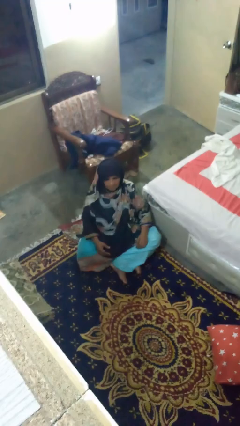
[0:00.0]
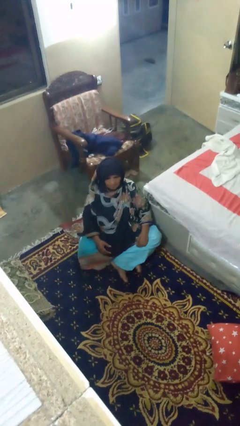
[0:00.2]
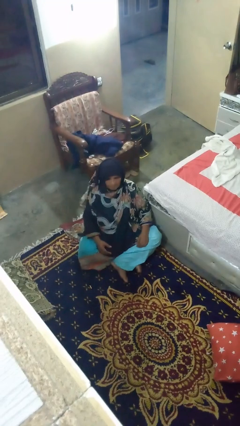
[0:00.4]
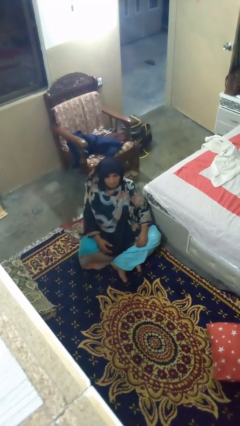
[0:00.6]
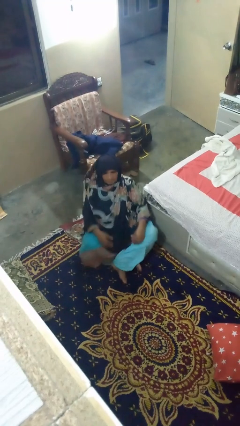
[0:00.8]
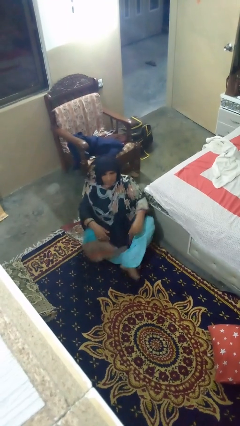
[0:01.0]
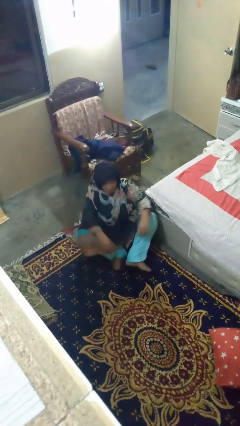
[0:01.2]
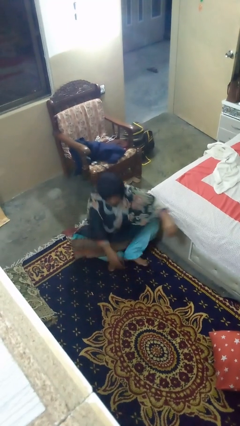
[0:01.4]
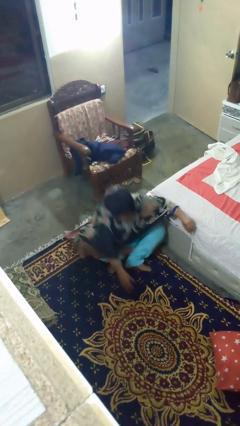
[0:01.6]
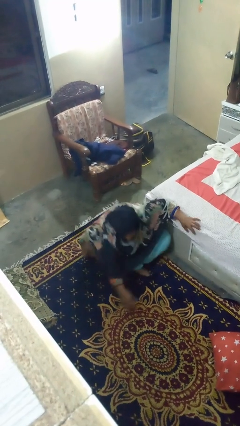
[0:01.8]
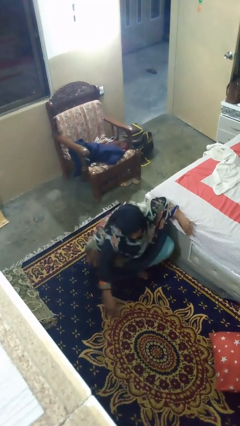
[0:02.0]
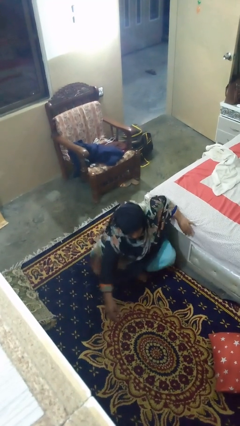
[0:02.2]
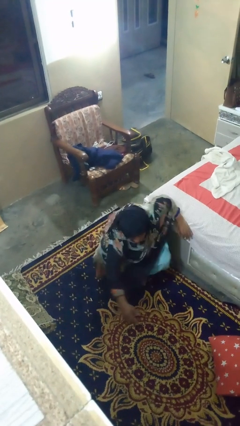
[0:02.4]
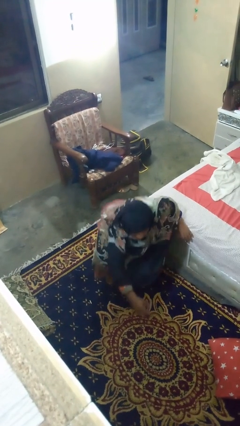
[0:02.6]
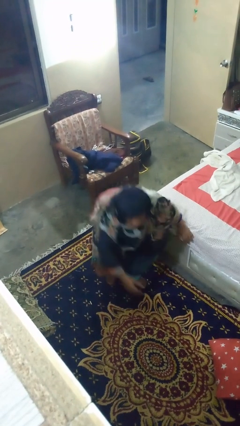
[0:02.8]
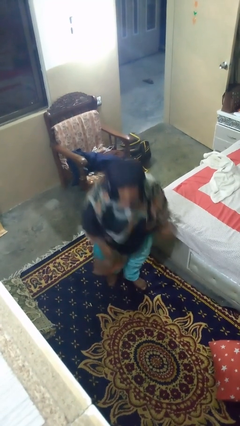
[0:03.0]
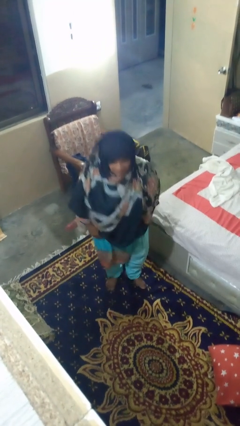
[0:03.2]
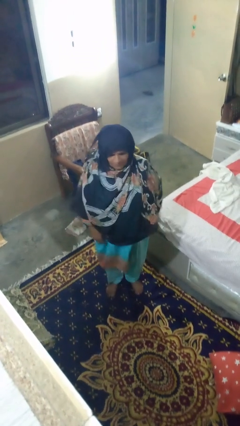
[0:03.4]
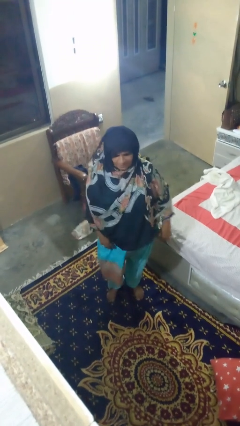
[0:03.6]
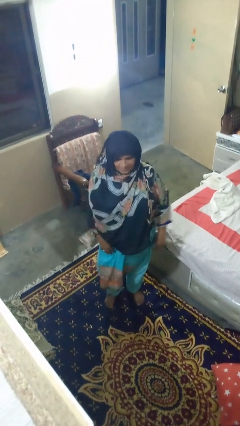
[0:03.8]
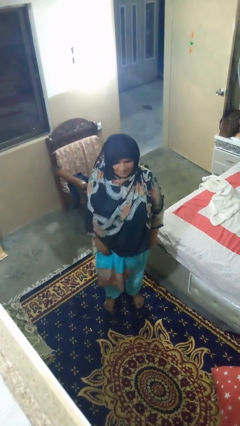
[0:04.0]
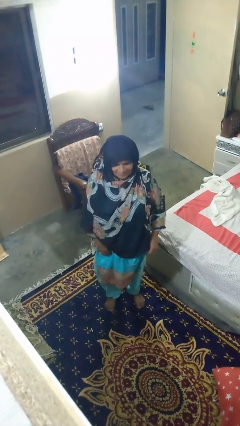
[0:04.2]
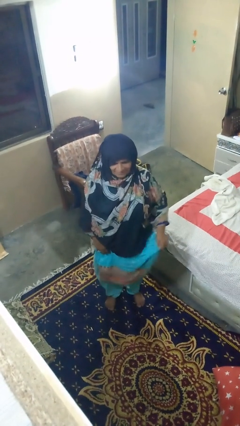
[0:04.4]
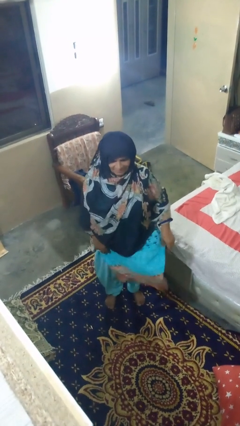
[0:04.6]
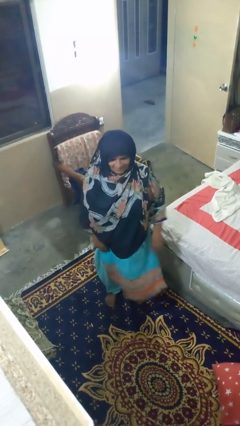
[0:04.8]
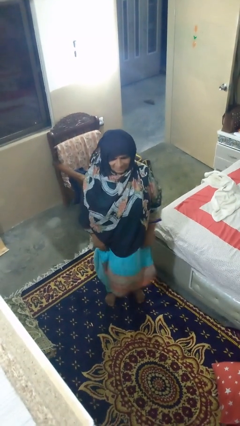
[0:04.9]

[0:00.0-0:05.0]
person stands up from floor

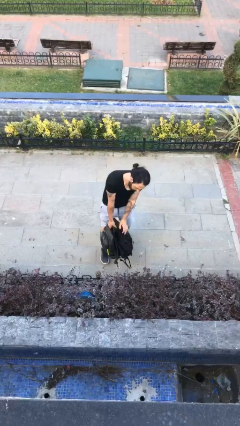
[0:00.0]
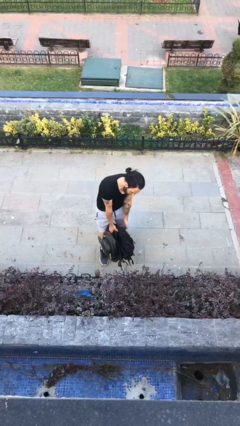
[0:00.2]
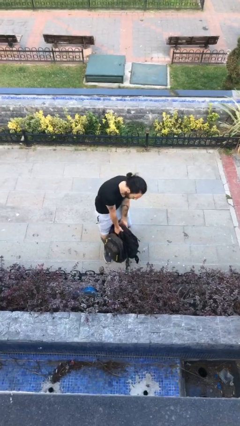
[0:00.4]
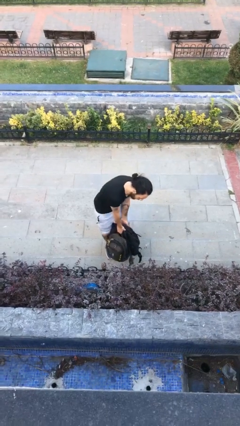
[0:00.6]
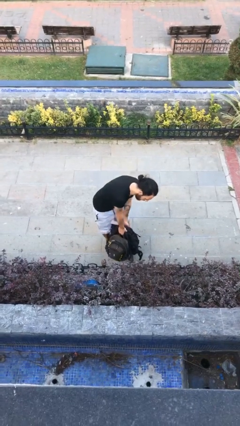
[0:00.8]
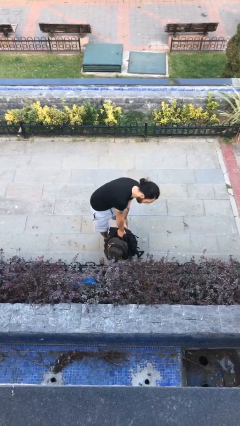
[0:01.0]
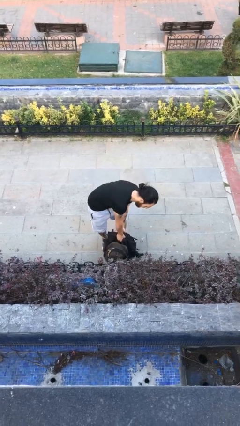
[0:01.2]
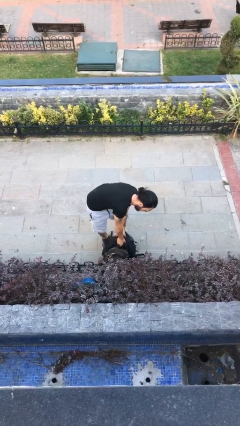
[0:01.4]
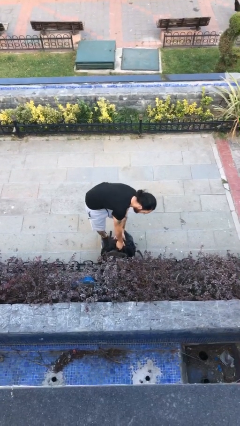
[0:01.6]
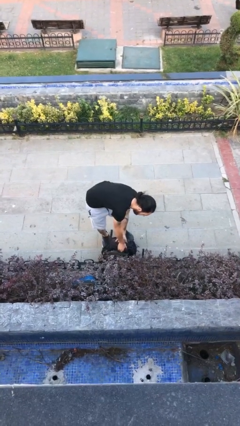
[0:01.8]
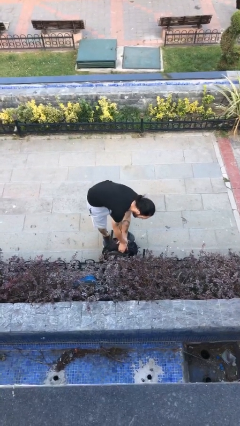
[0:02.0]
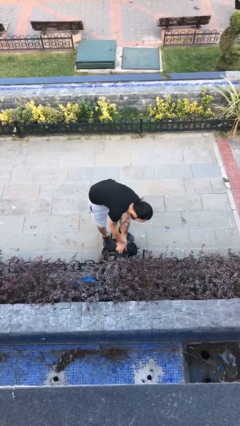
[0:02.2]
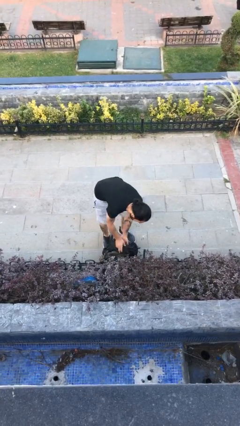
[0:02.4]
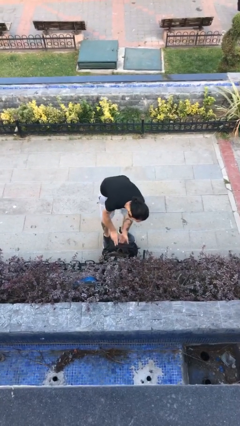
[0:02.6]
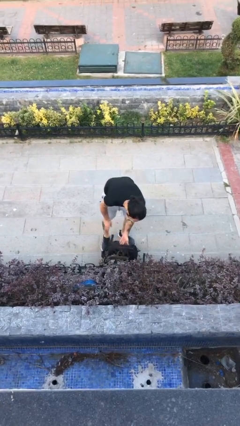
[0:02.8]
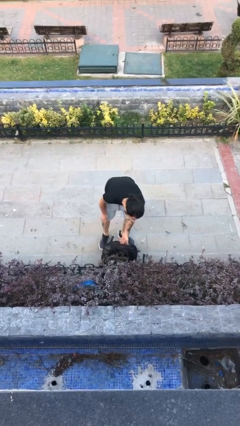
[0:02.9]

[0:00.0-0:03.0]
person puts down object on floor

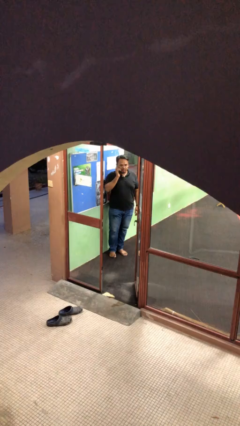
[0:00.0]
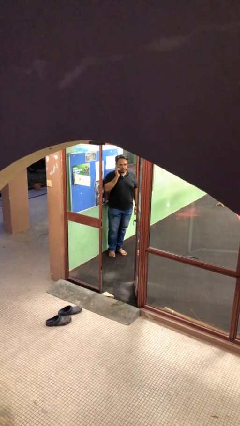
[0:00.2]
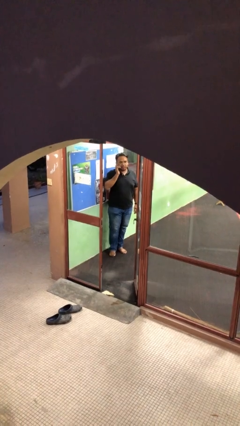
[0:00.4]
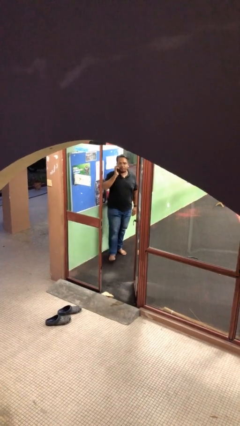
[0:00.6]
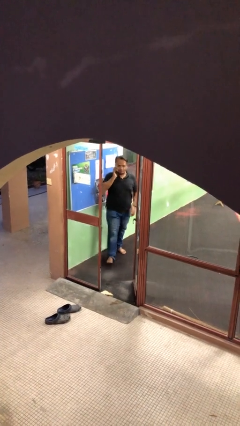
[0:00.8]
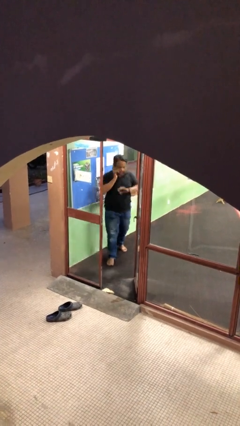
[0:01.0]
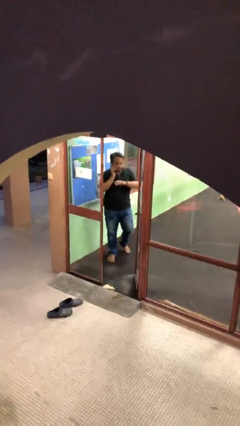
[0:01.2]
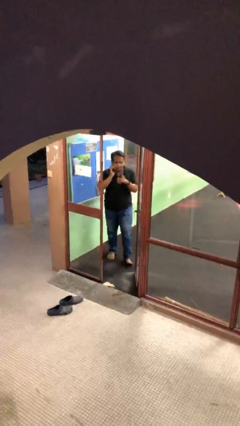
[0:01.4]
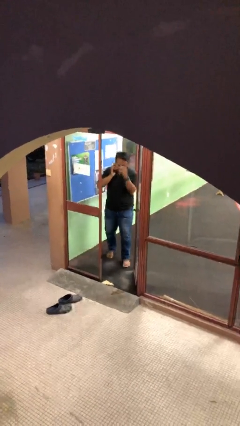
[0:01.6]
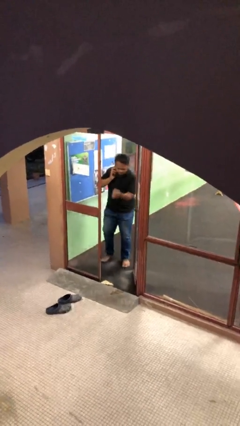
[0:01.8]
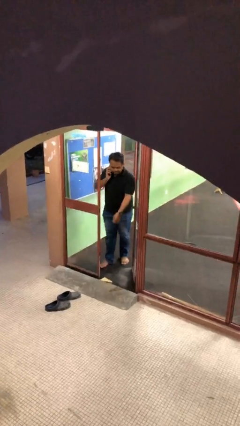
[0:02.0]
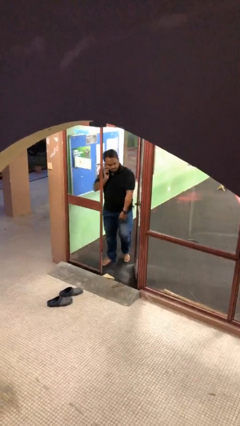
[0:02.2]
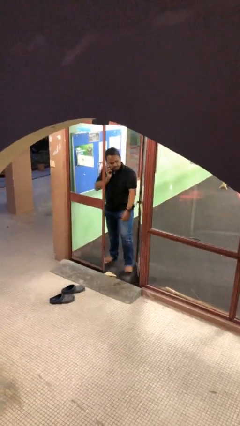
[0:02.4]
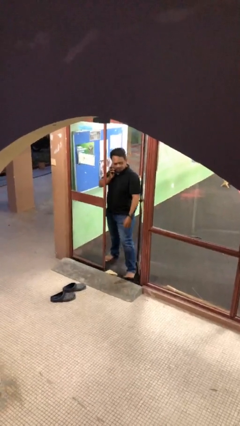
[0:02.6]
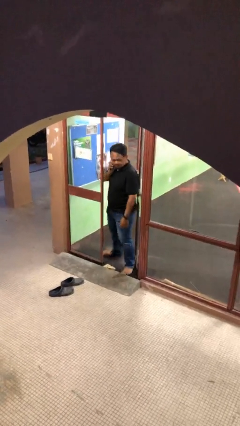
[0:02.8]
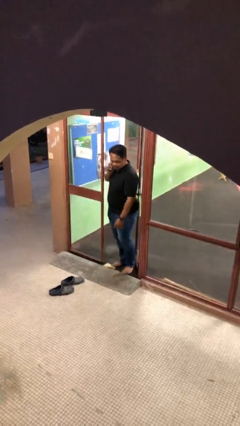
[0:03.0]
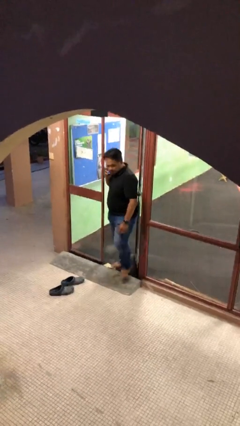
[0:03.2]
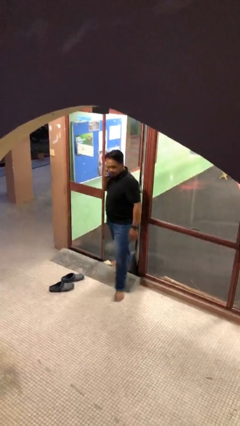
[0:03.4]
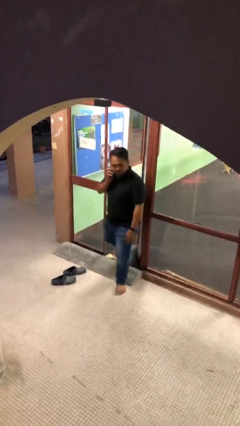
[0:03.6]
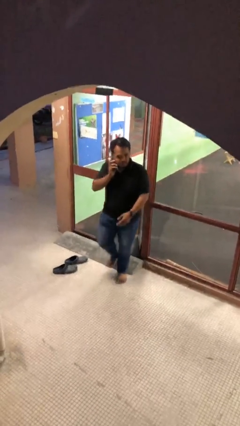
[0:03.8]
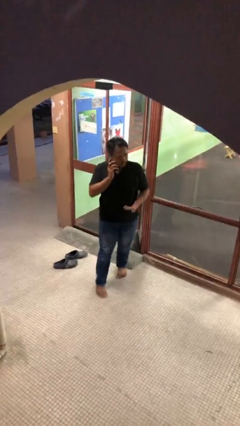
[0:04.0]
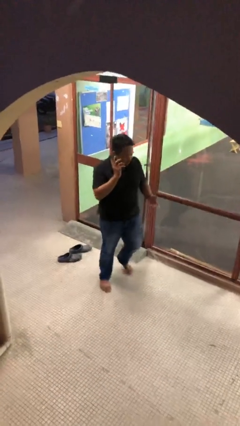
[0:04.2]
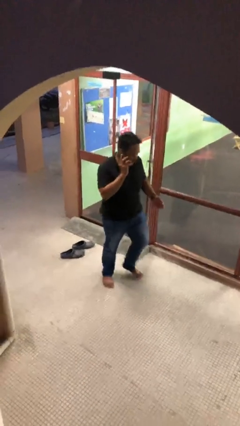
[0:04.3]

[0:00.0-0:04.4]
person enters scene through structure

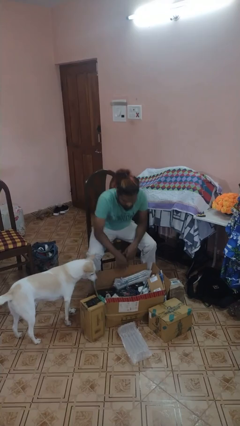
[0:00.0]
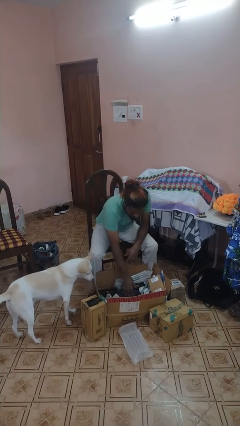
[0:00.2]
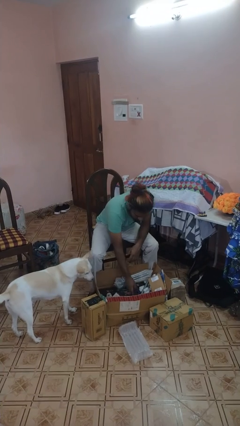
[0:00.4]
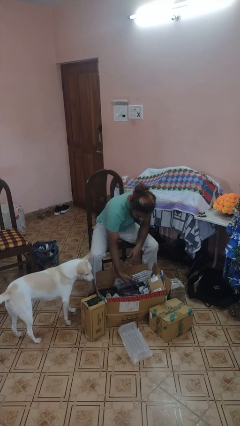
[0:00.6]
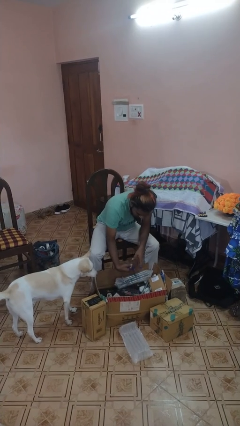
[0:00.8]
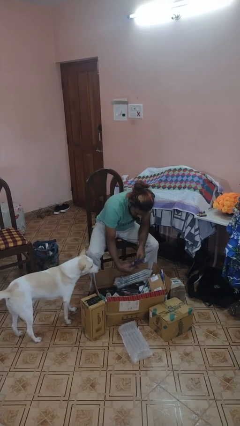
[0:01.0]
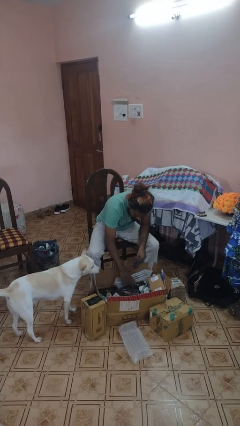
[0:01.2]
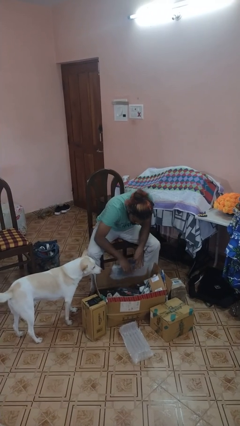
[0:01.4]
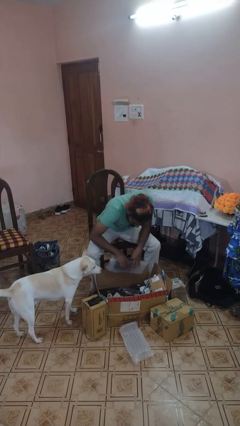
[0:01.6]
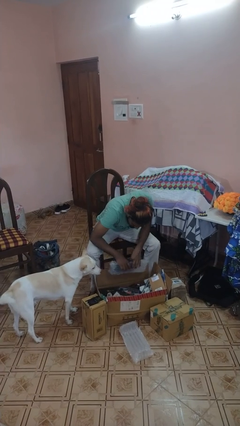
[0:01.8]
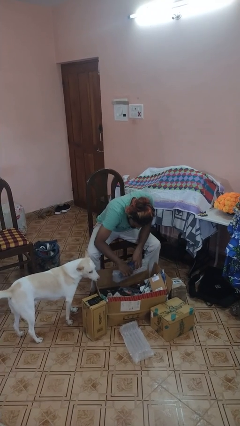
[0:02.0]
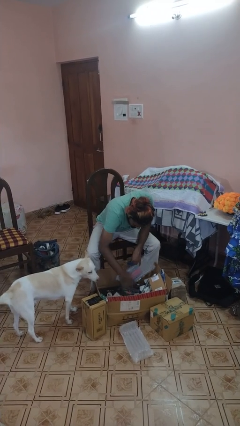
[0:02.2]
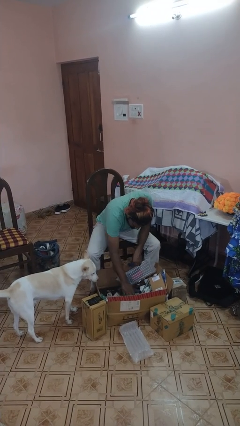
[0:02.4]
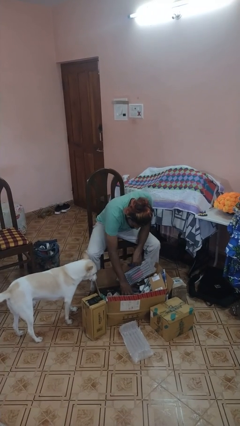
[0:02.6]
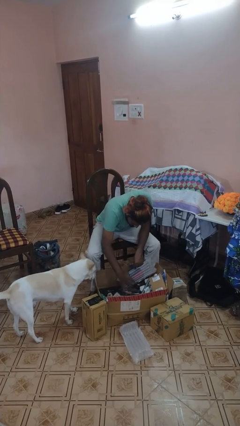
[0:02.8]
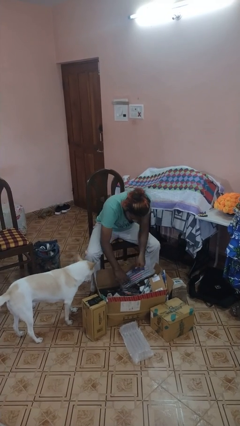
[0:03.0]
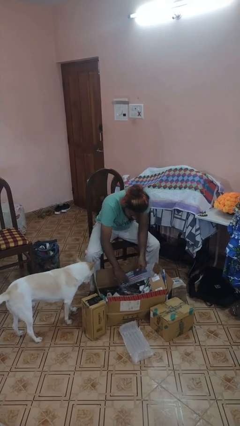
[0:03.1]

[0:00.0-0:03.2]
person searches in box

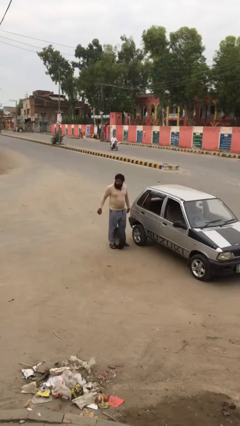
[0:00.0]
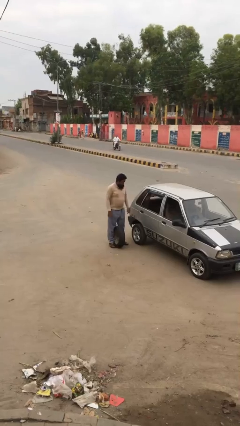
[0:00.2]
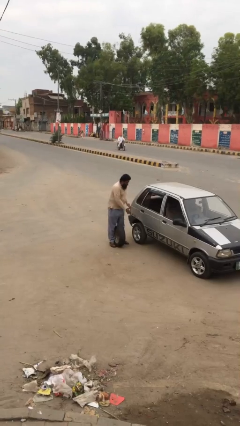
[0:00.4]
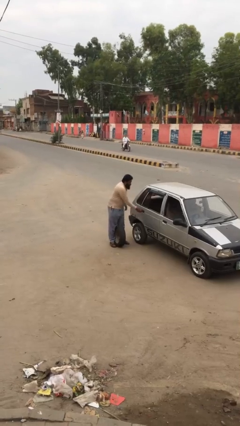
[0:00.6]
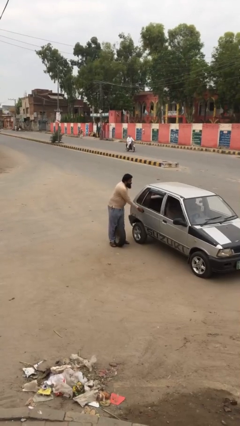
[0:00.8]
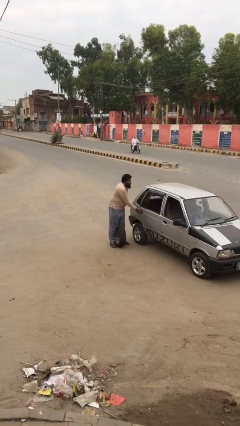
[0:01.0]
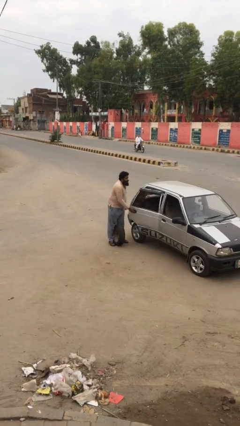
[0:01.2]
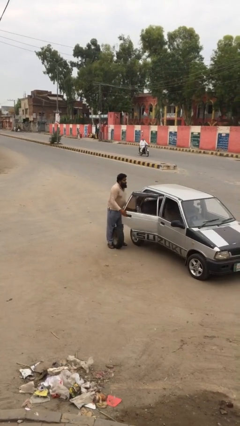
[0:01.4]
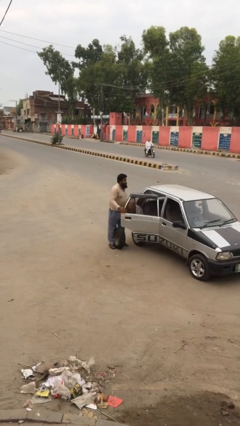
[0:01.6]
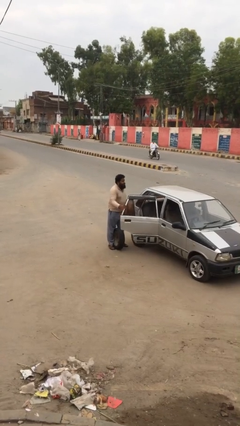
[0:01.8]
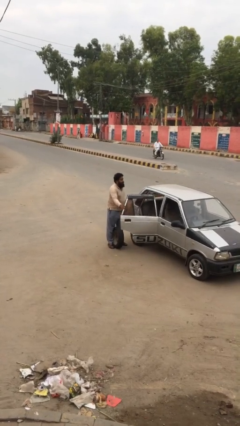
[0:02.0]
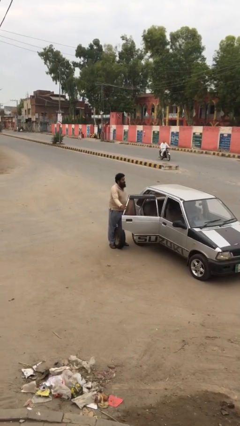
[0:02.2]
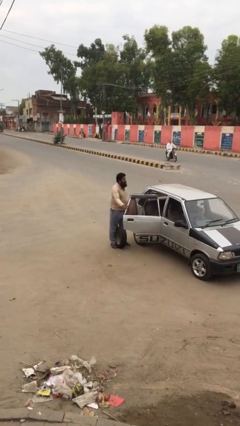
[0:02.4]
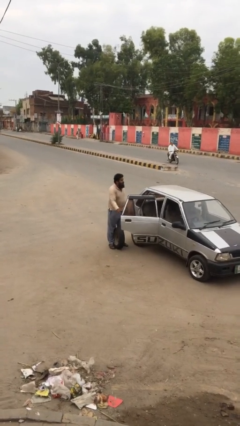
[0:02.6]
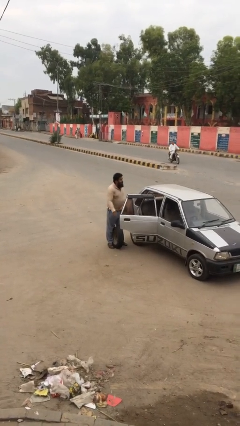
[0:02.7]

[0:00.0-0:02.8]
person opens car door
